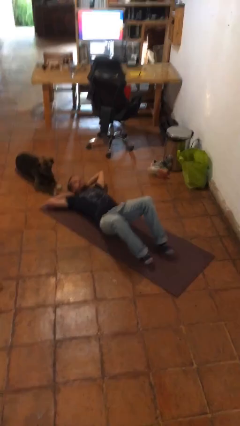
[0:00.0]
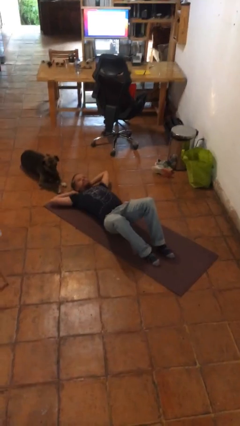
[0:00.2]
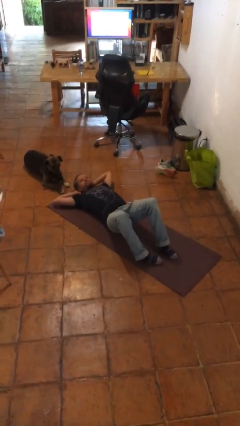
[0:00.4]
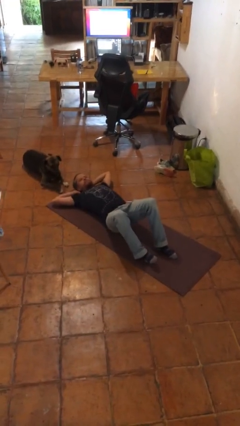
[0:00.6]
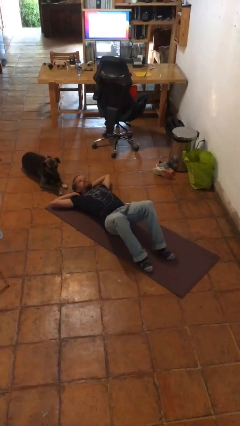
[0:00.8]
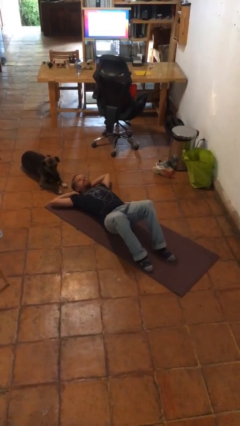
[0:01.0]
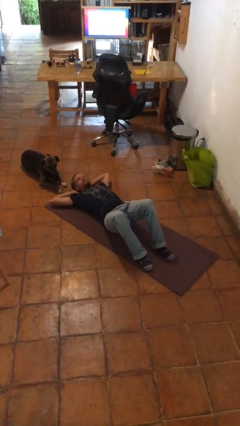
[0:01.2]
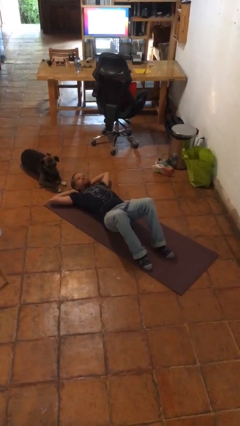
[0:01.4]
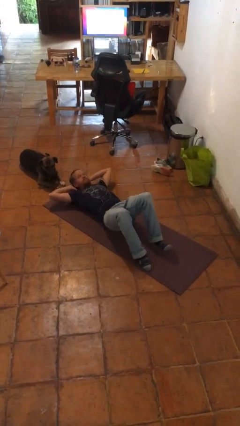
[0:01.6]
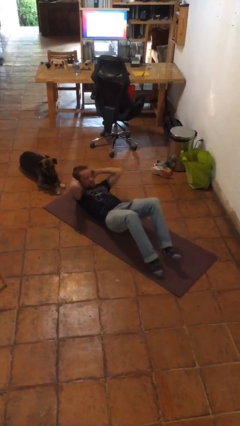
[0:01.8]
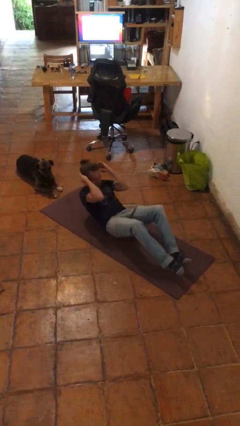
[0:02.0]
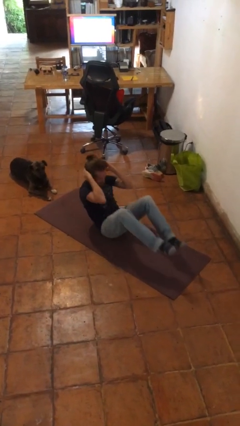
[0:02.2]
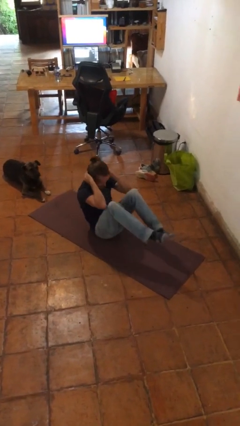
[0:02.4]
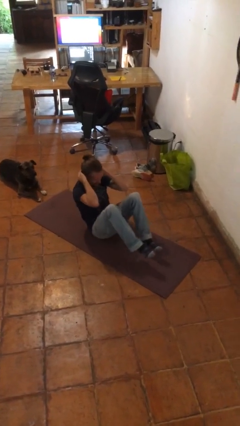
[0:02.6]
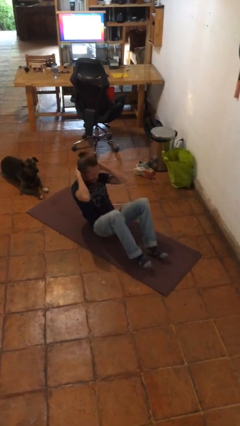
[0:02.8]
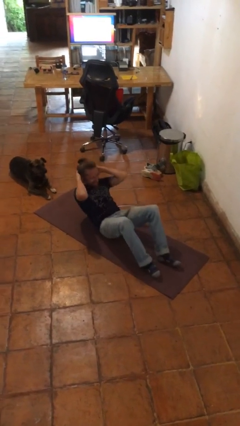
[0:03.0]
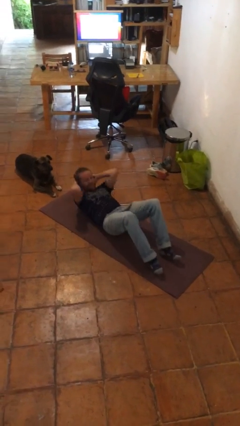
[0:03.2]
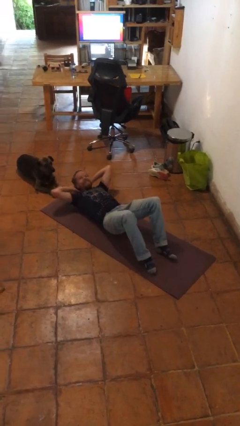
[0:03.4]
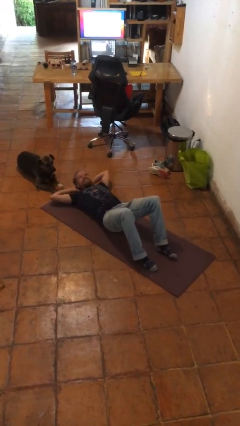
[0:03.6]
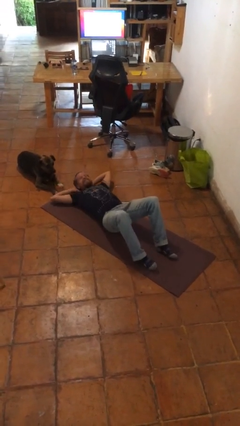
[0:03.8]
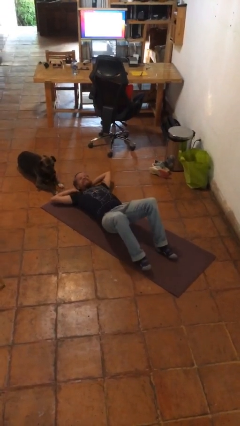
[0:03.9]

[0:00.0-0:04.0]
person exercises with situp

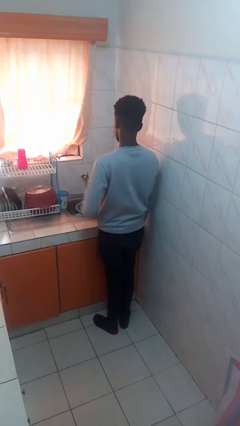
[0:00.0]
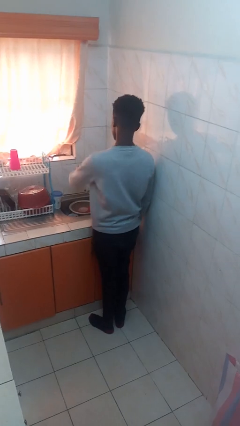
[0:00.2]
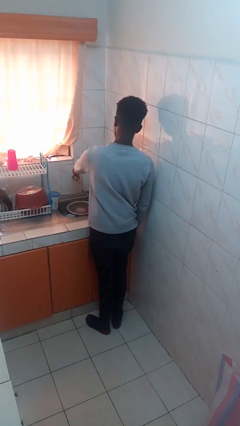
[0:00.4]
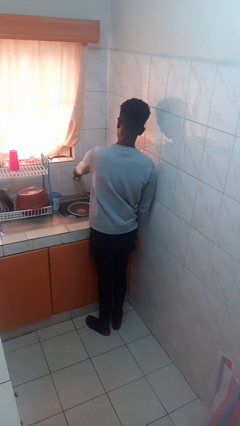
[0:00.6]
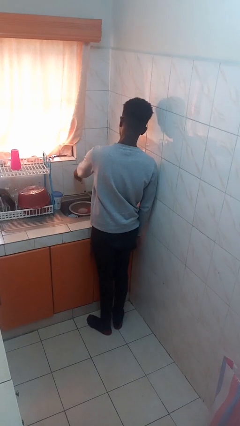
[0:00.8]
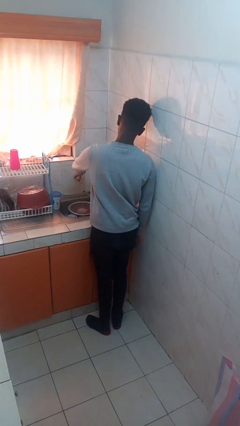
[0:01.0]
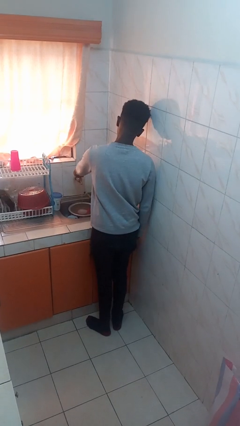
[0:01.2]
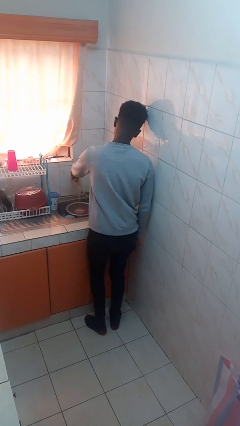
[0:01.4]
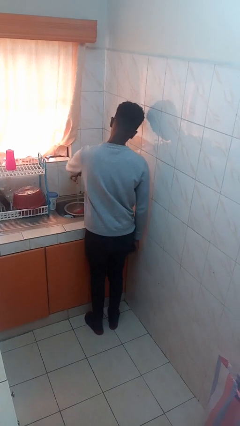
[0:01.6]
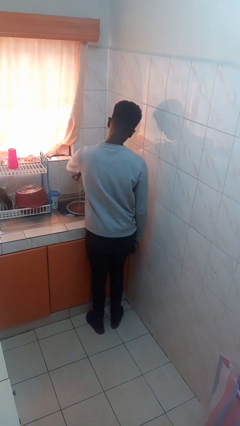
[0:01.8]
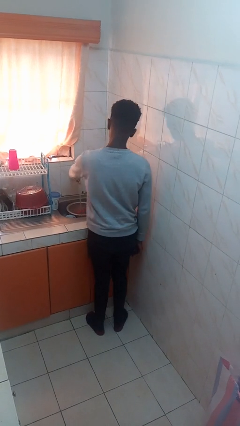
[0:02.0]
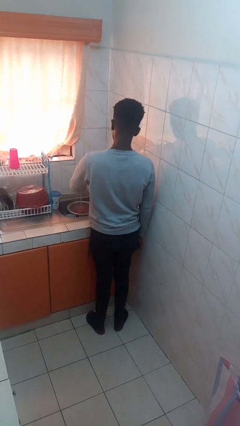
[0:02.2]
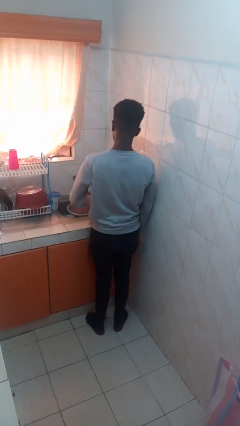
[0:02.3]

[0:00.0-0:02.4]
person turns on faucet

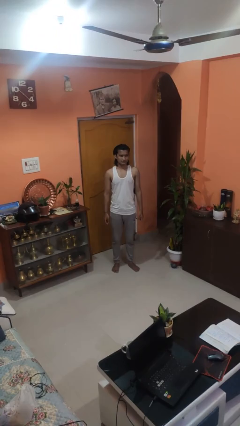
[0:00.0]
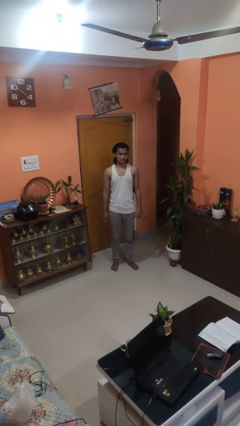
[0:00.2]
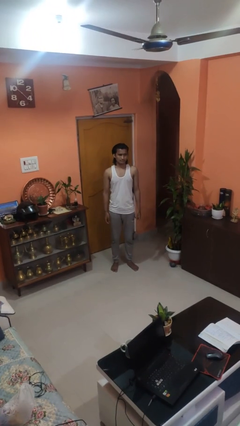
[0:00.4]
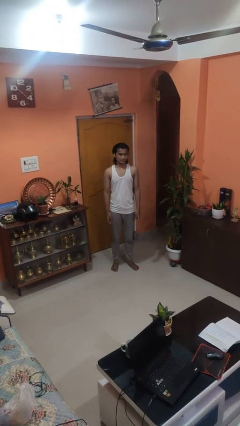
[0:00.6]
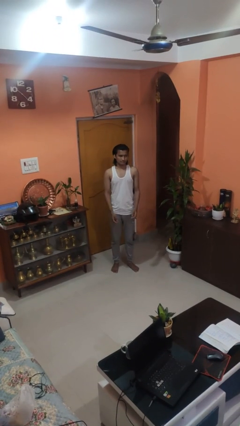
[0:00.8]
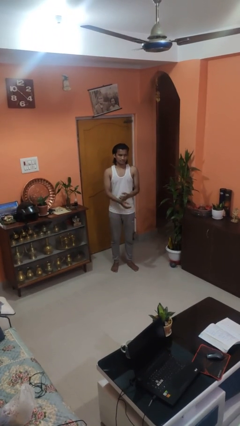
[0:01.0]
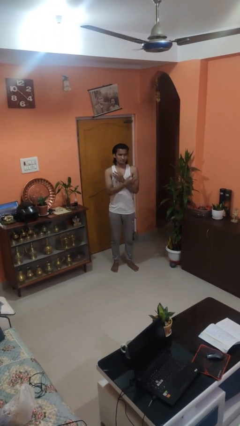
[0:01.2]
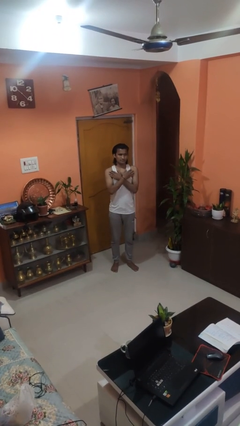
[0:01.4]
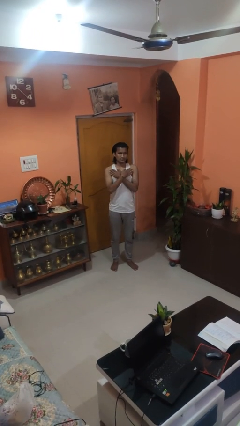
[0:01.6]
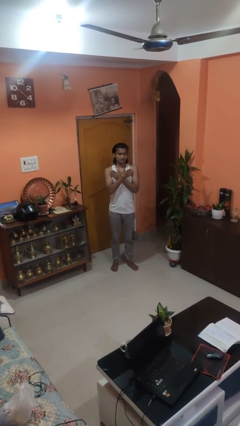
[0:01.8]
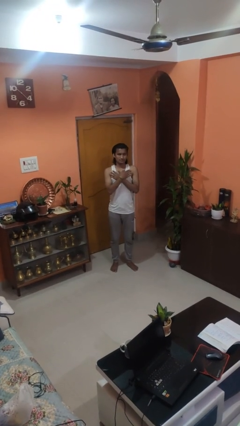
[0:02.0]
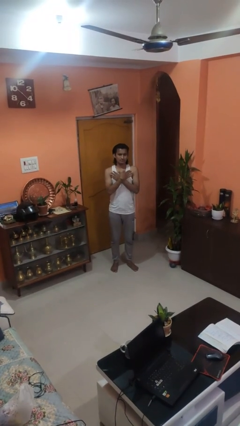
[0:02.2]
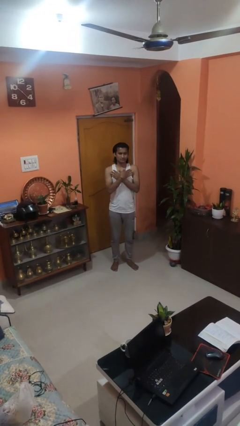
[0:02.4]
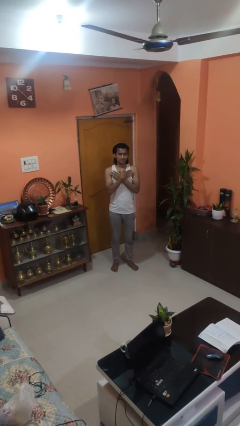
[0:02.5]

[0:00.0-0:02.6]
person drums on chest

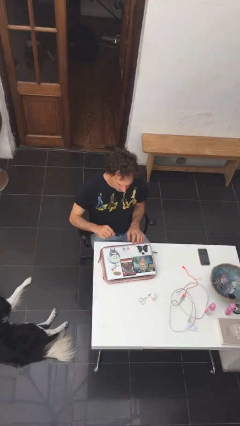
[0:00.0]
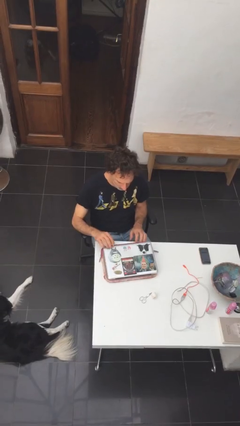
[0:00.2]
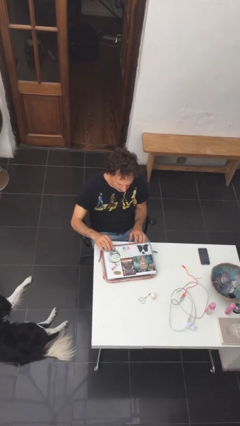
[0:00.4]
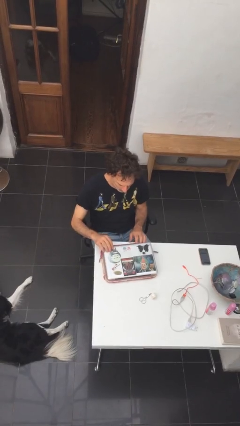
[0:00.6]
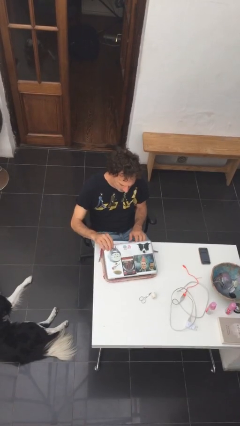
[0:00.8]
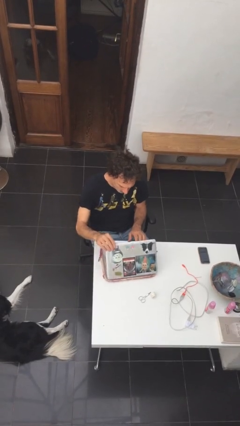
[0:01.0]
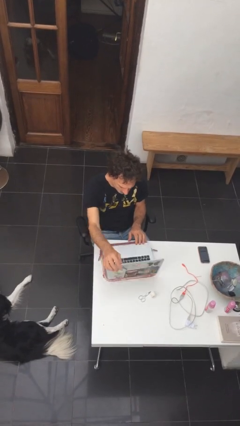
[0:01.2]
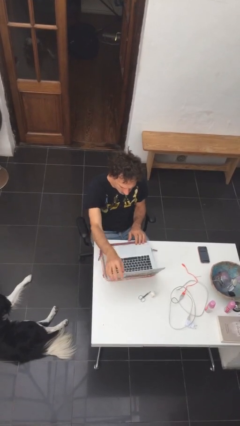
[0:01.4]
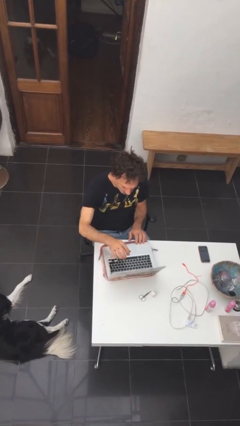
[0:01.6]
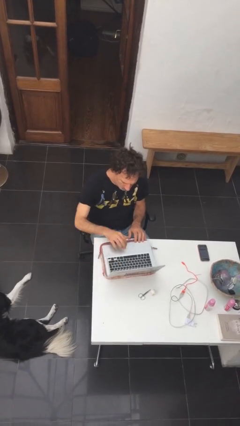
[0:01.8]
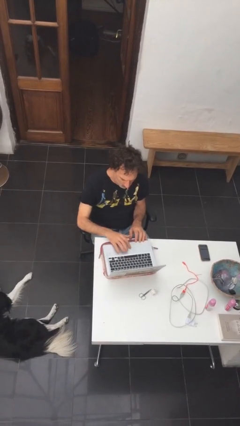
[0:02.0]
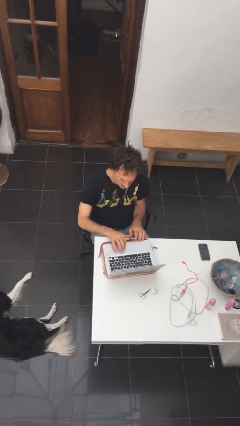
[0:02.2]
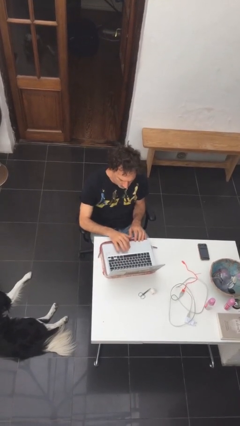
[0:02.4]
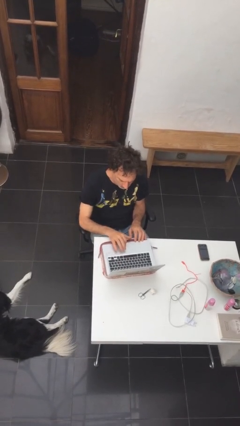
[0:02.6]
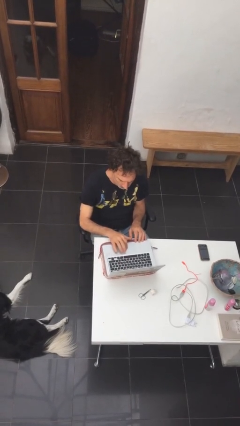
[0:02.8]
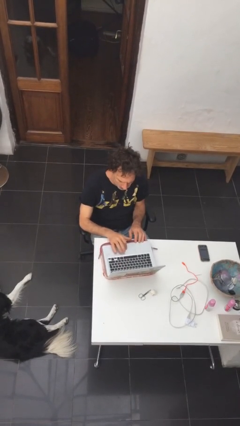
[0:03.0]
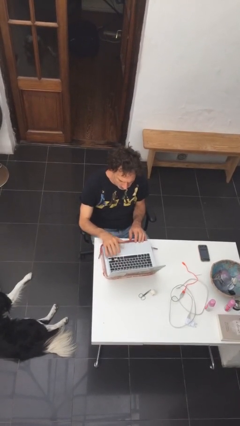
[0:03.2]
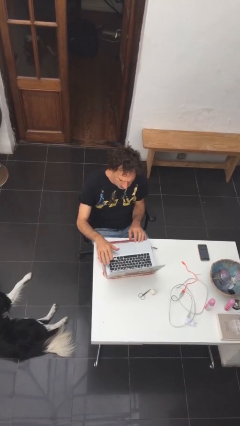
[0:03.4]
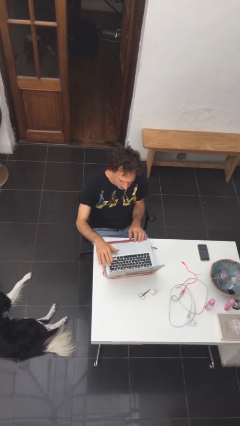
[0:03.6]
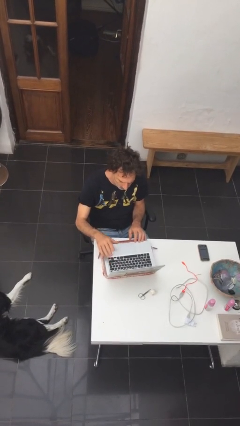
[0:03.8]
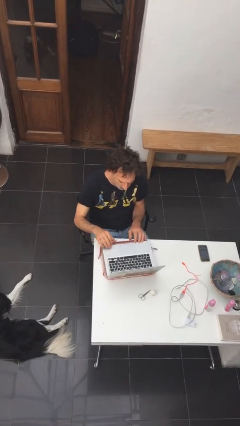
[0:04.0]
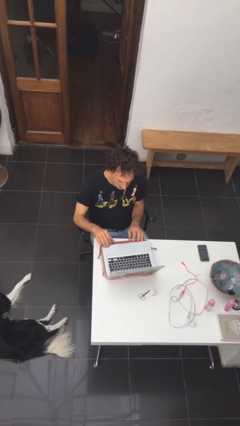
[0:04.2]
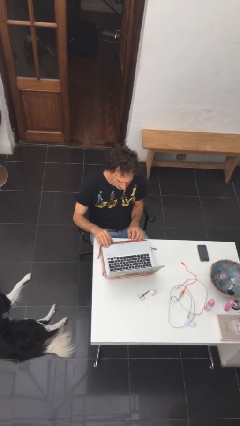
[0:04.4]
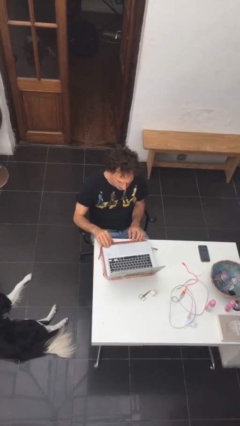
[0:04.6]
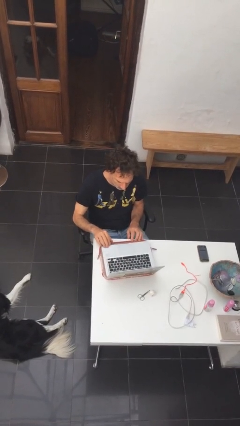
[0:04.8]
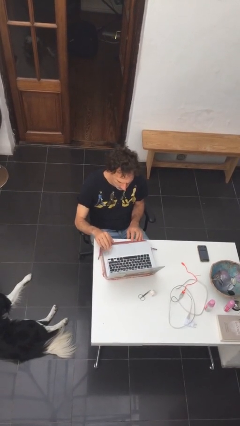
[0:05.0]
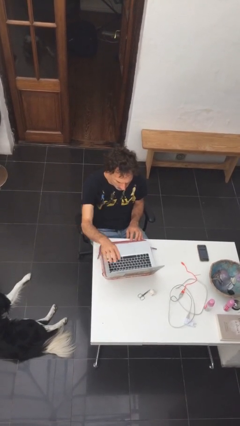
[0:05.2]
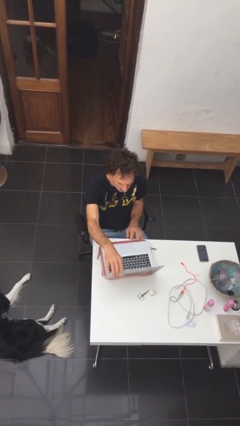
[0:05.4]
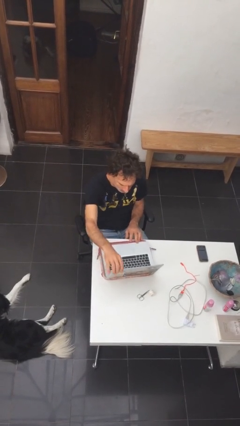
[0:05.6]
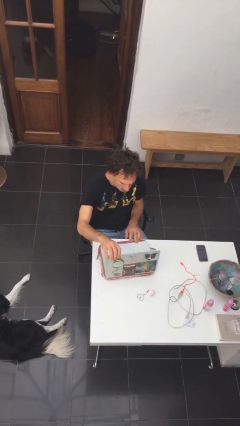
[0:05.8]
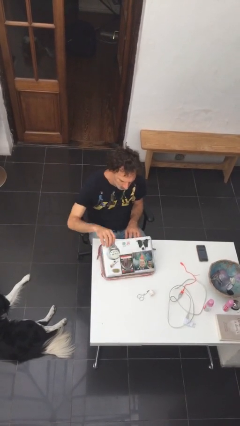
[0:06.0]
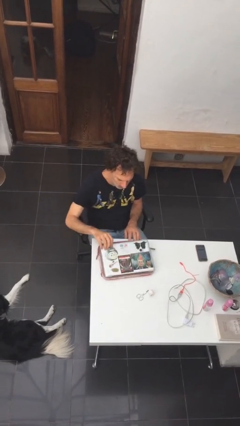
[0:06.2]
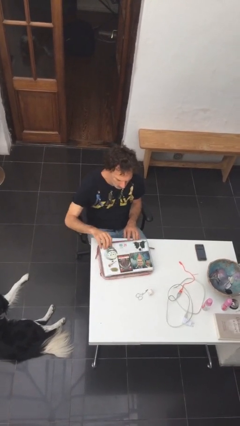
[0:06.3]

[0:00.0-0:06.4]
person interacts with laptop

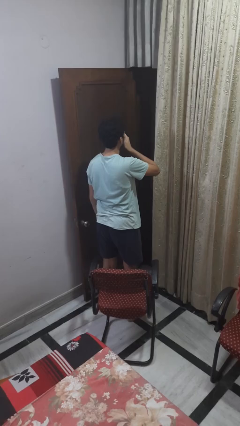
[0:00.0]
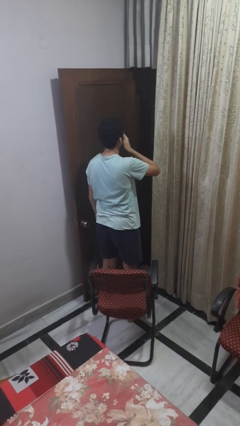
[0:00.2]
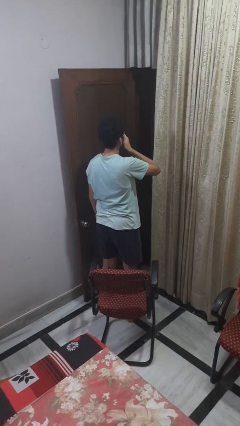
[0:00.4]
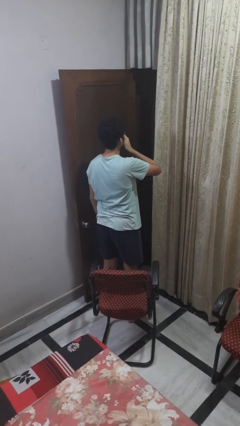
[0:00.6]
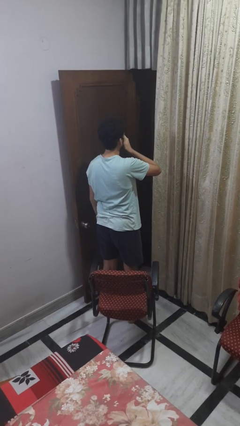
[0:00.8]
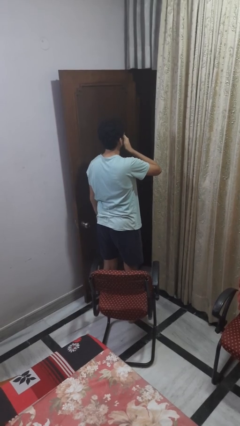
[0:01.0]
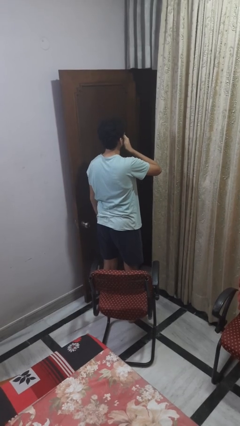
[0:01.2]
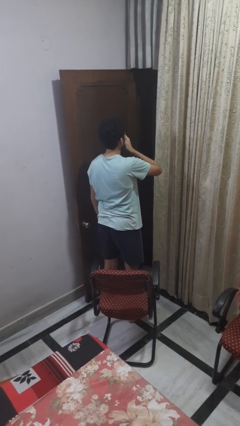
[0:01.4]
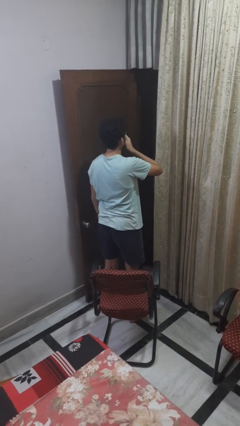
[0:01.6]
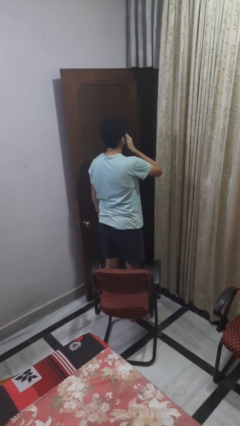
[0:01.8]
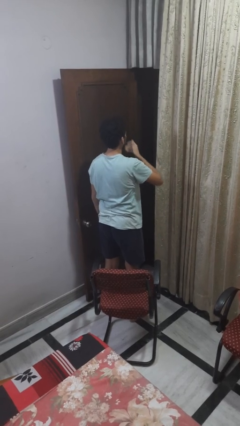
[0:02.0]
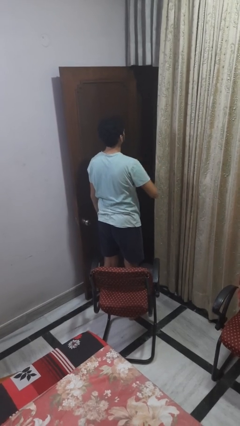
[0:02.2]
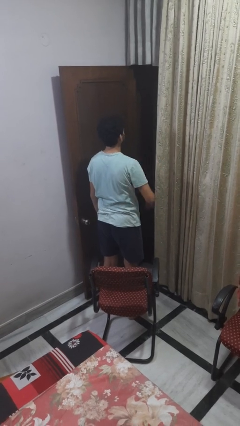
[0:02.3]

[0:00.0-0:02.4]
person yawns

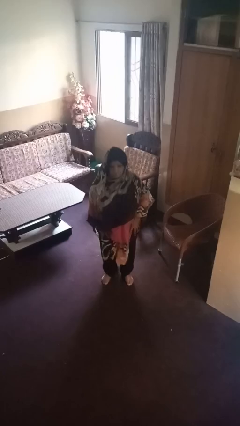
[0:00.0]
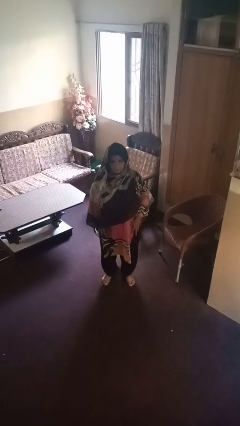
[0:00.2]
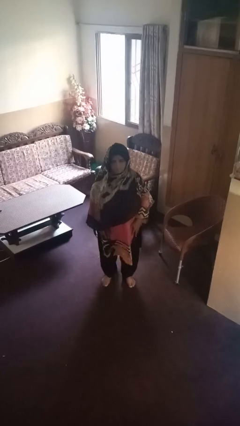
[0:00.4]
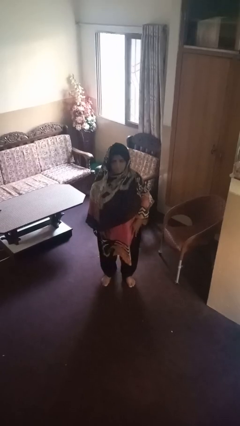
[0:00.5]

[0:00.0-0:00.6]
person jumps
